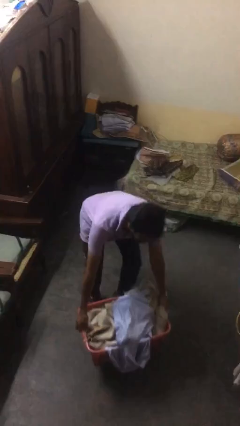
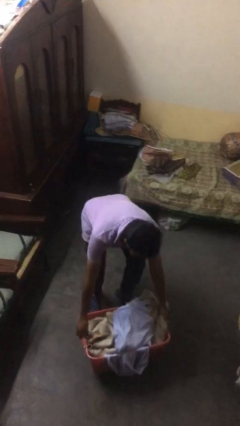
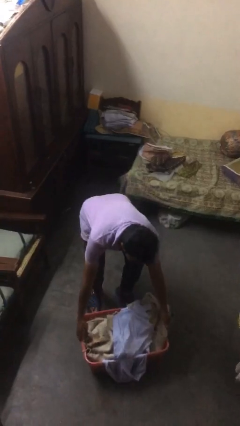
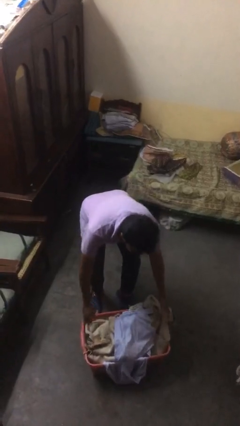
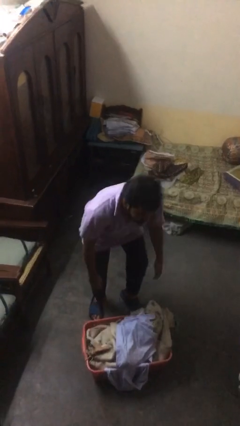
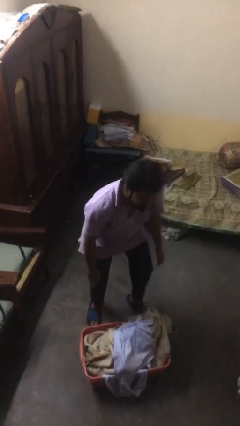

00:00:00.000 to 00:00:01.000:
person puts down object on floor

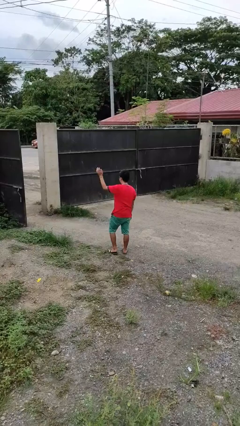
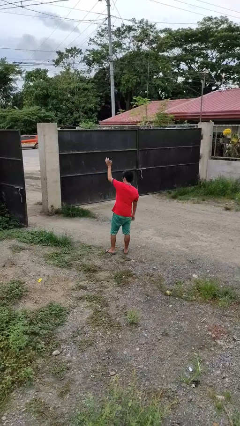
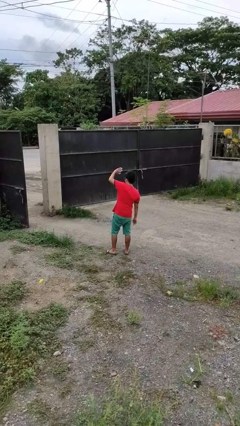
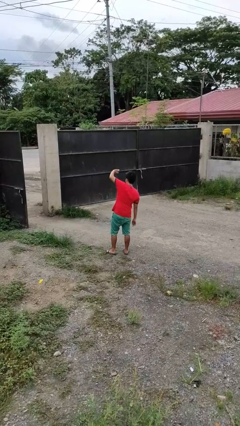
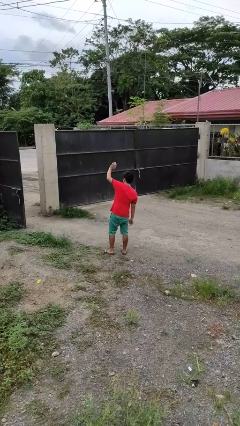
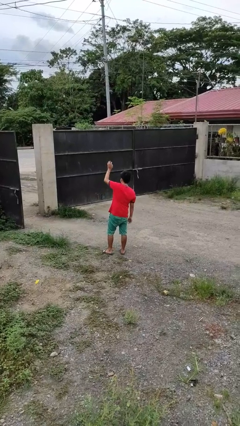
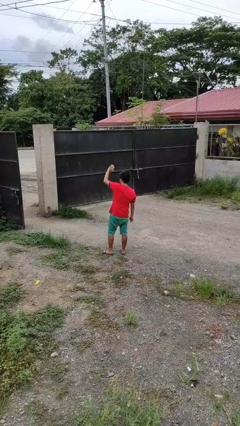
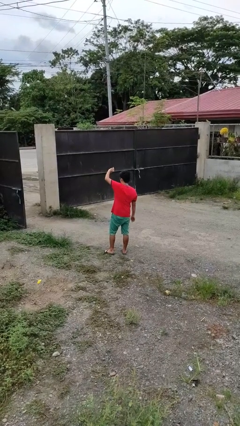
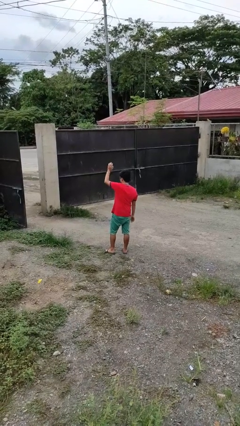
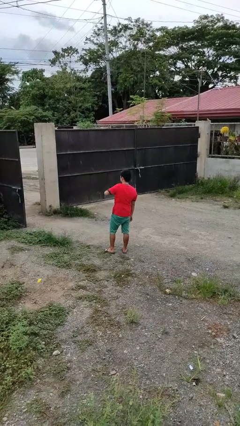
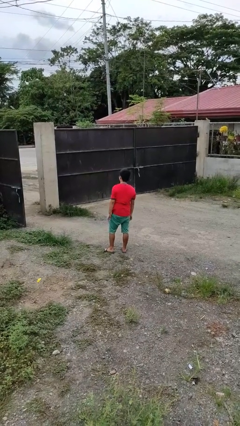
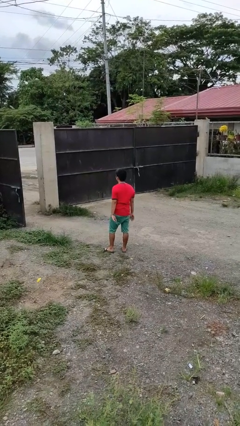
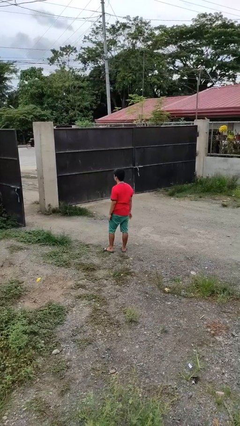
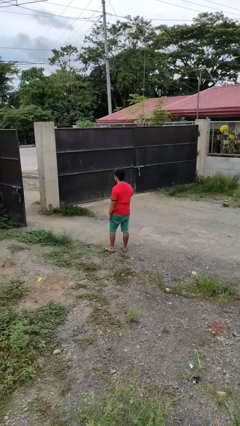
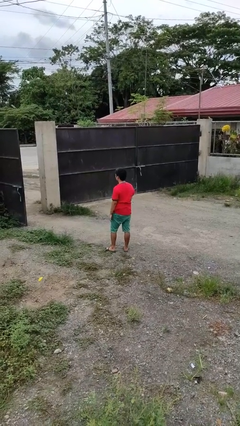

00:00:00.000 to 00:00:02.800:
person waves at person

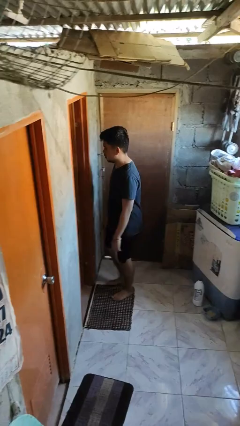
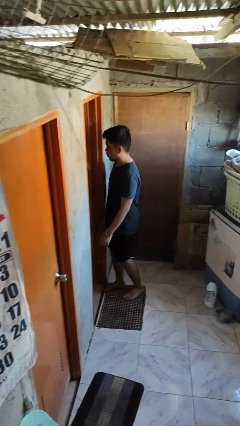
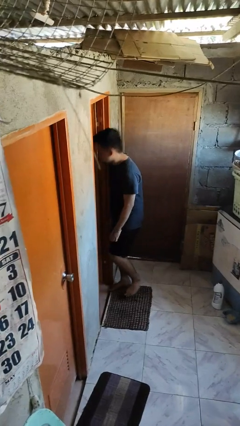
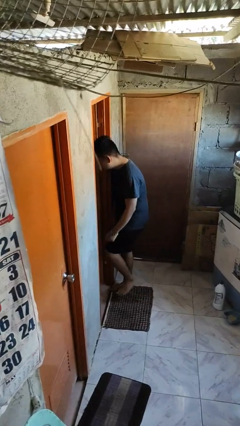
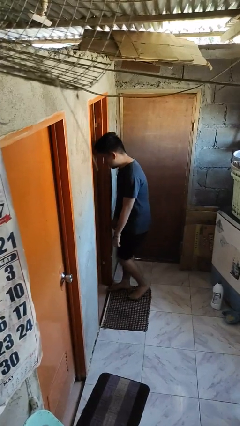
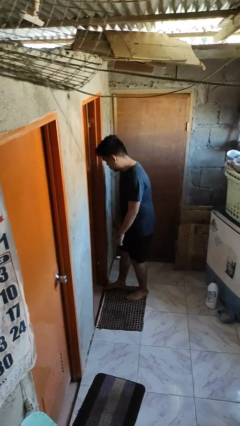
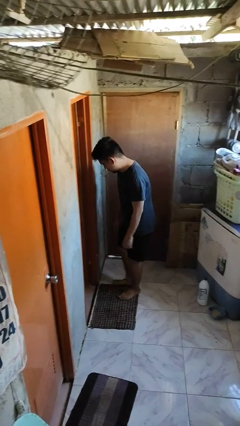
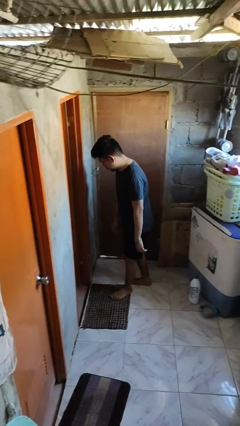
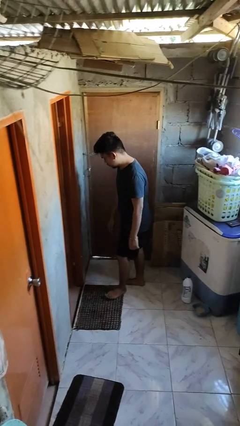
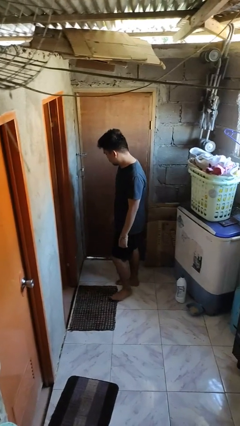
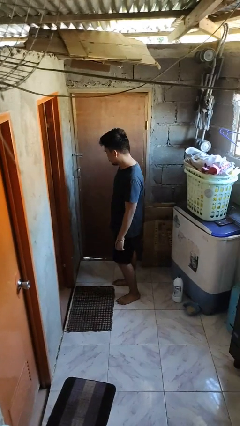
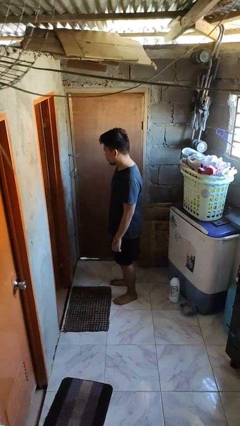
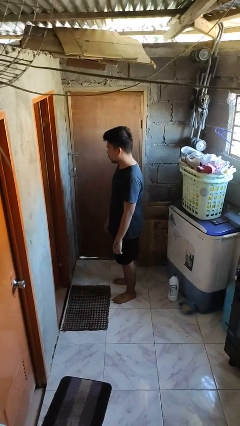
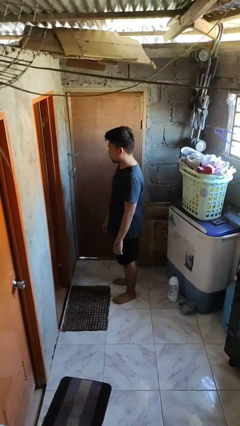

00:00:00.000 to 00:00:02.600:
person bumps into wall

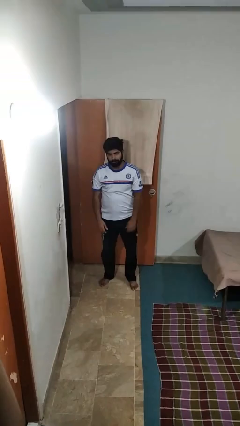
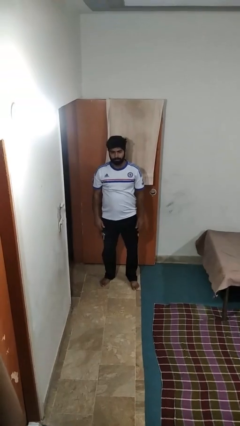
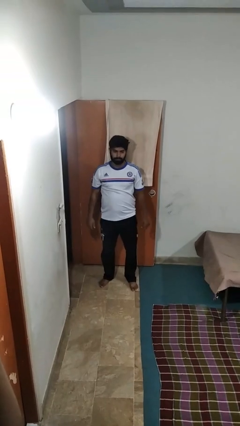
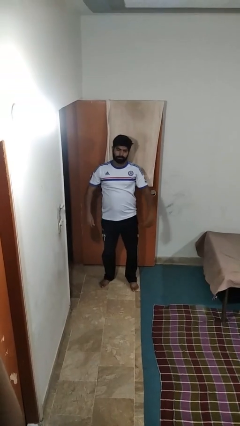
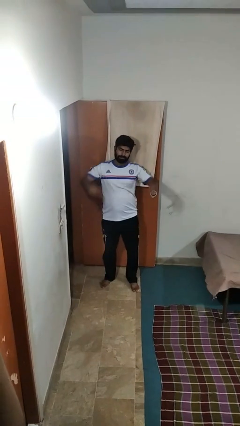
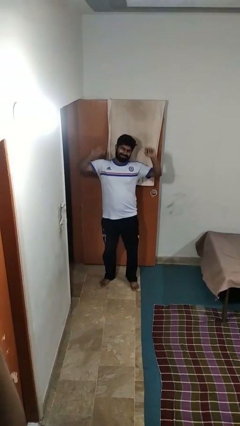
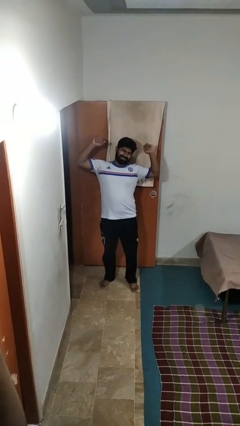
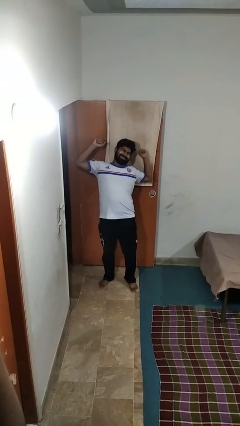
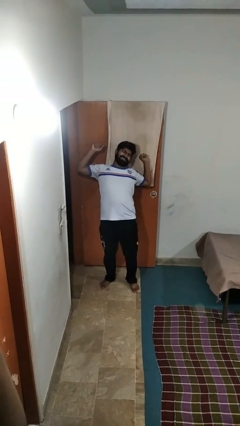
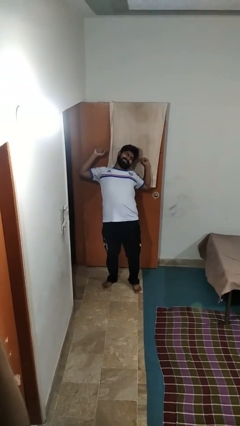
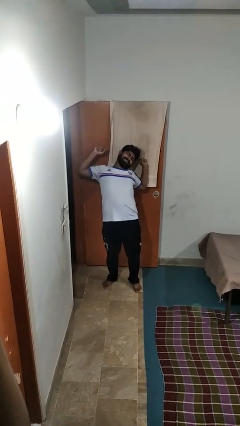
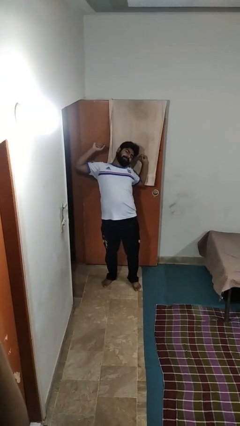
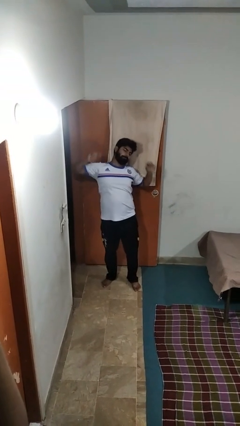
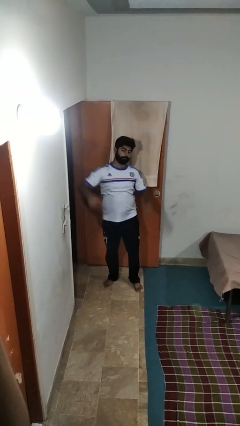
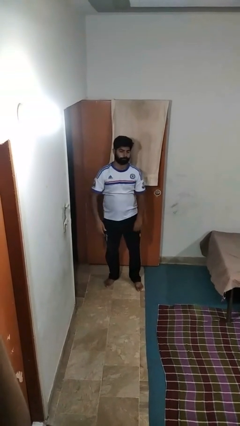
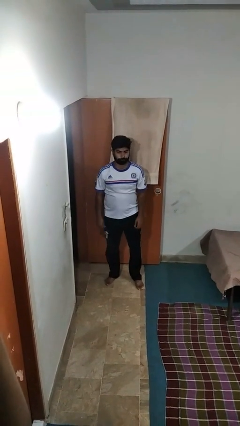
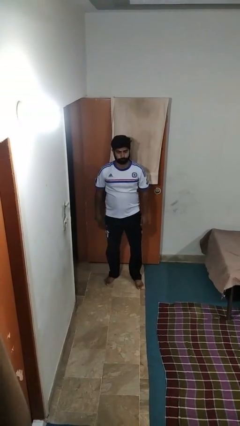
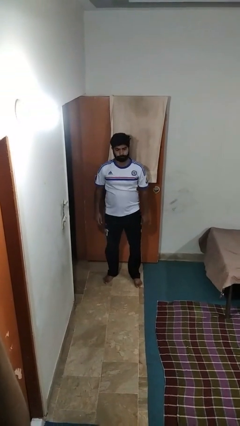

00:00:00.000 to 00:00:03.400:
person stretches arms to side

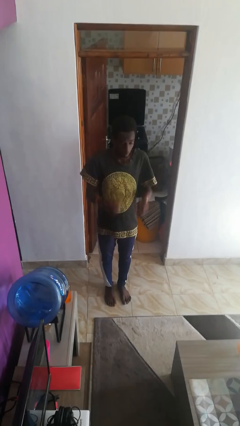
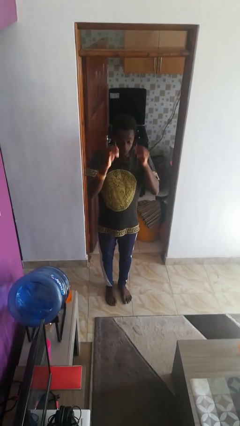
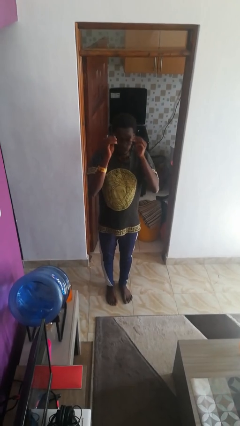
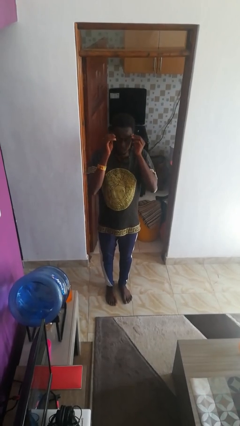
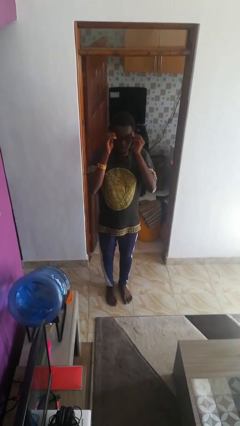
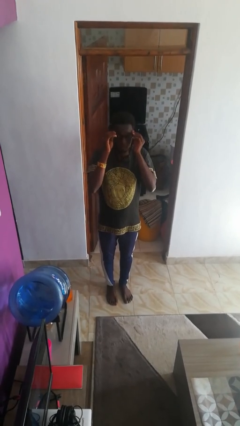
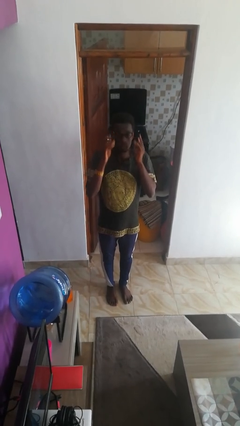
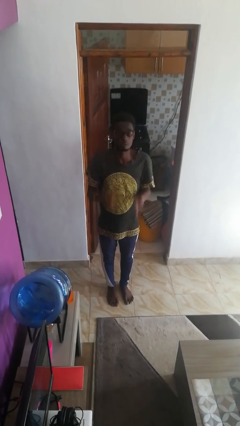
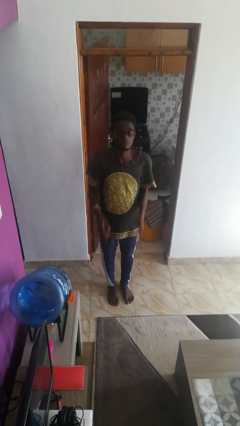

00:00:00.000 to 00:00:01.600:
person puts on glasses

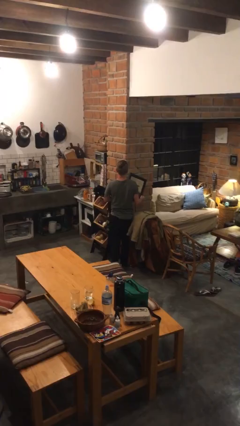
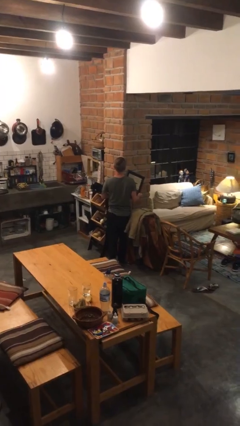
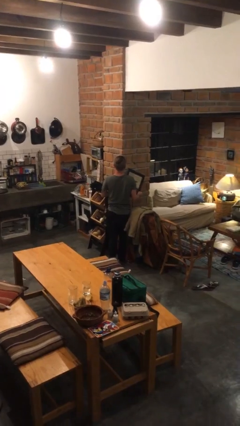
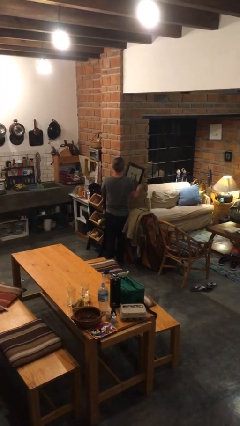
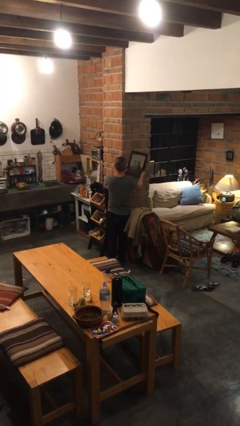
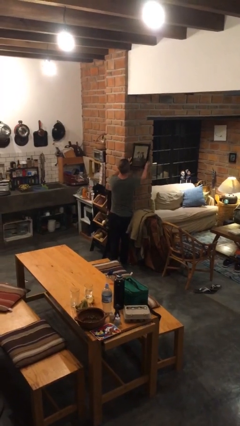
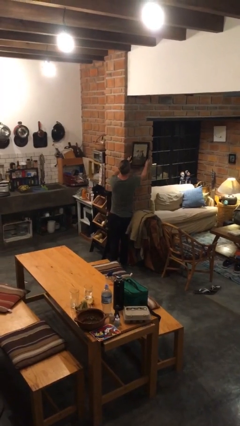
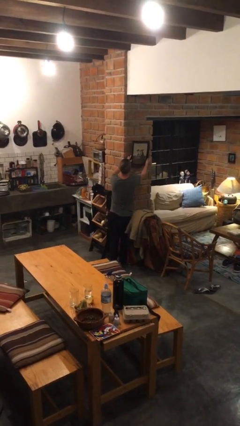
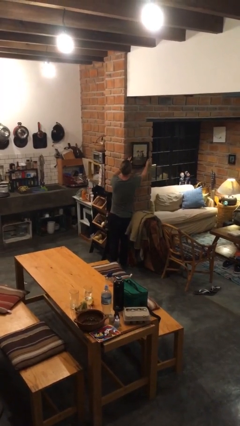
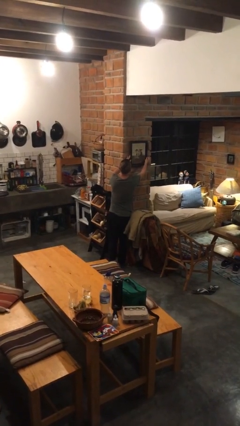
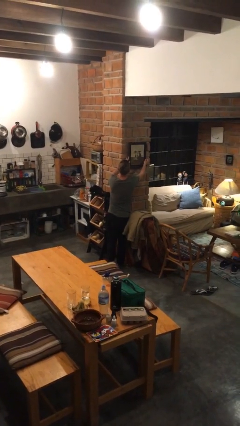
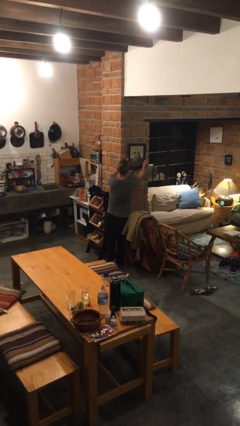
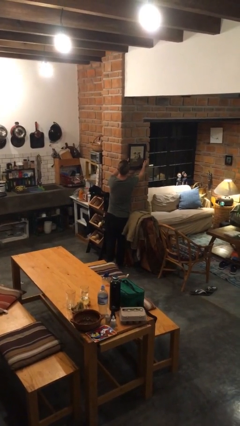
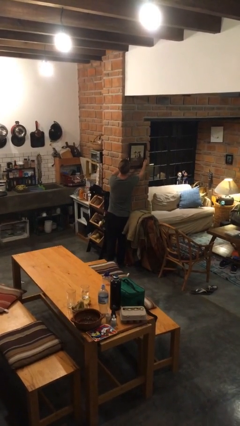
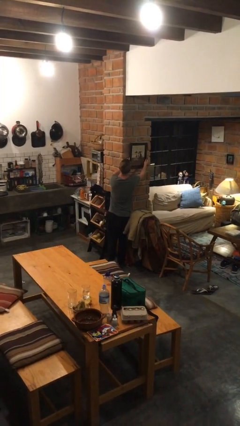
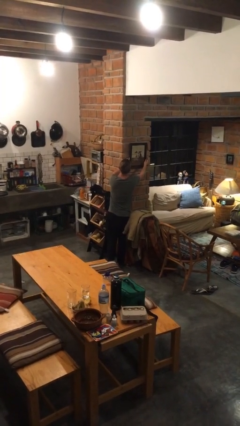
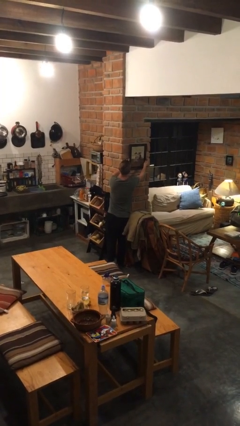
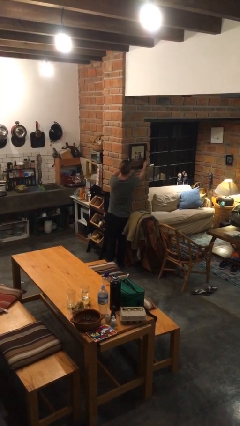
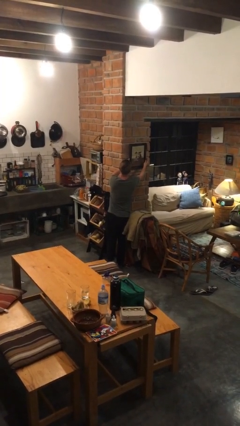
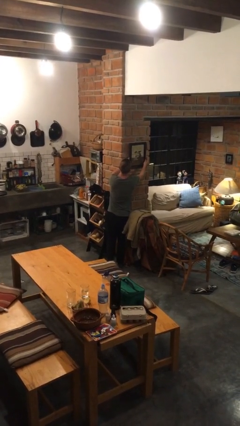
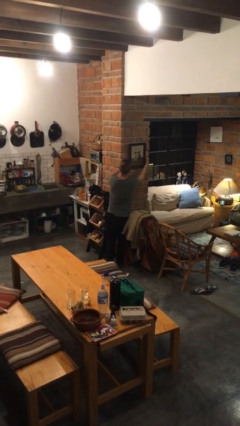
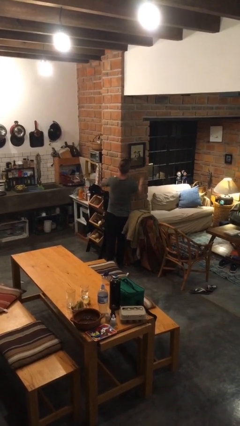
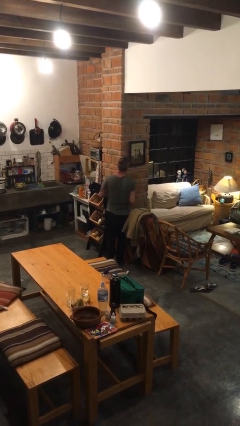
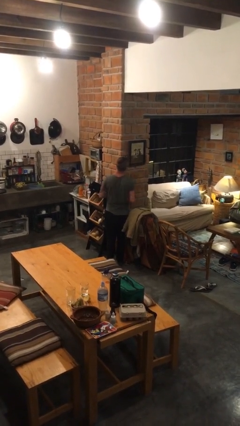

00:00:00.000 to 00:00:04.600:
person puts up picture frame

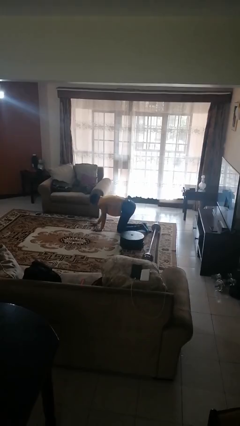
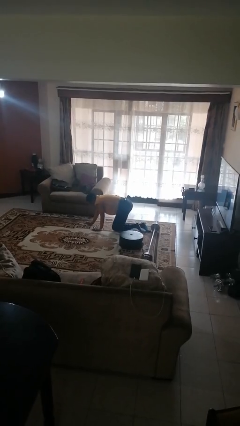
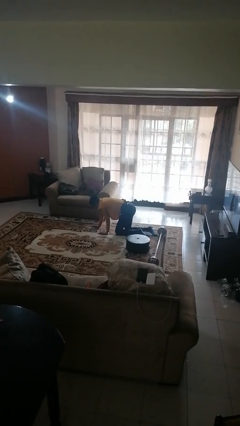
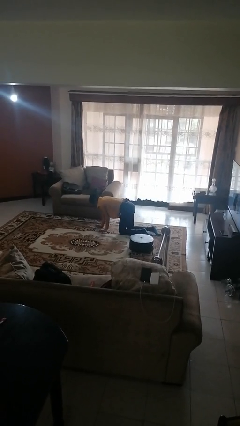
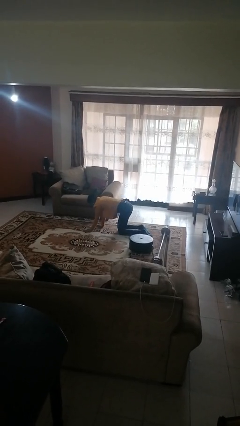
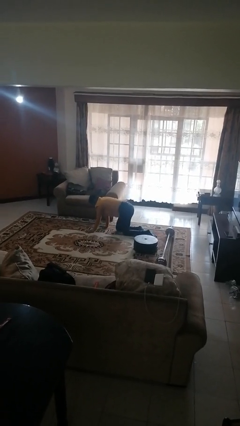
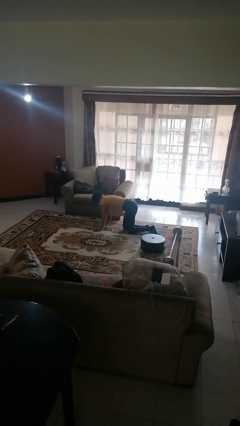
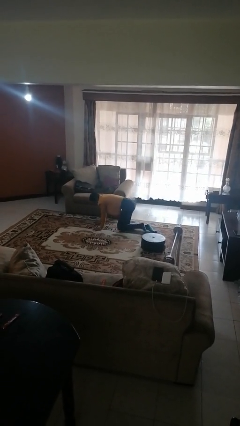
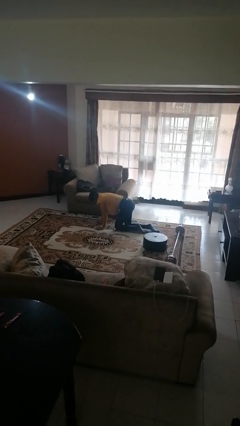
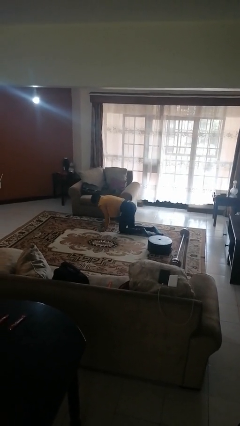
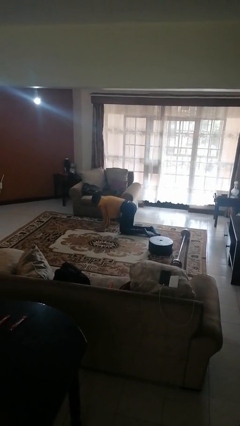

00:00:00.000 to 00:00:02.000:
person crawls
